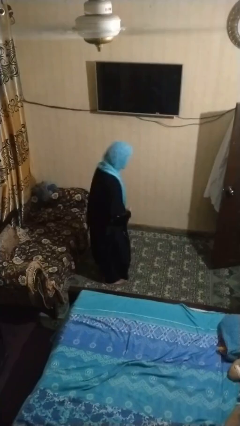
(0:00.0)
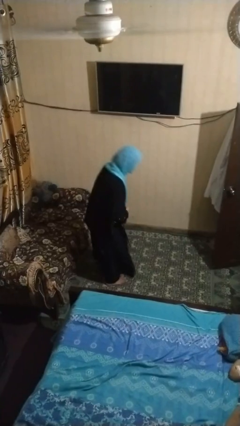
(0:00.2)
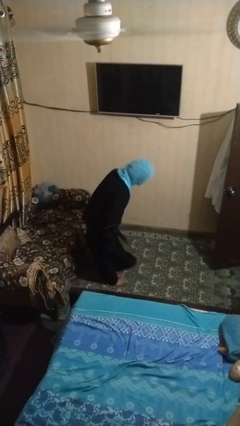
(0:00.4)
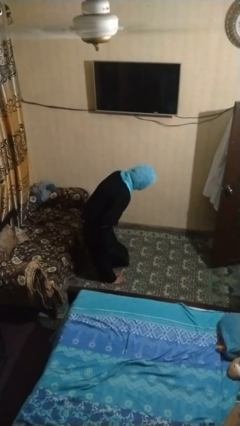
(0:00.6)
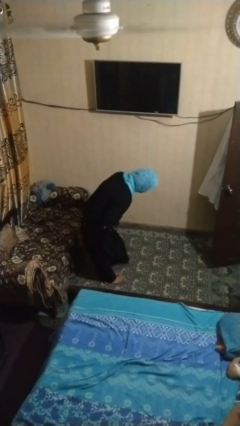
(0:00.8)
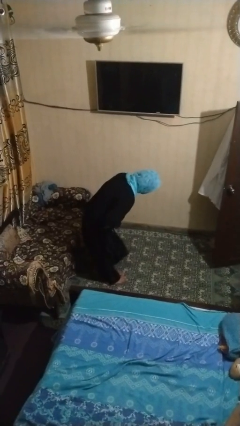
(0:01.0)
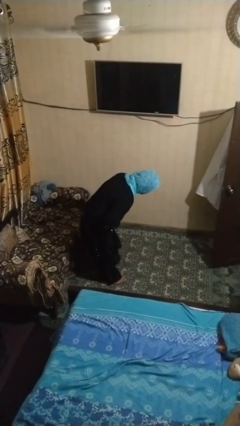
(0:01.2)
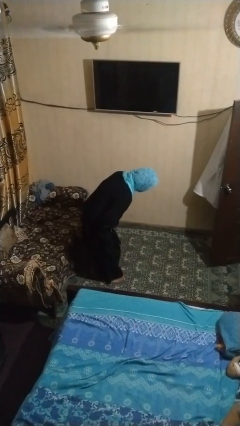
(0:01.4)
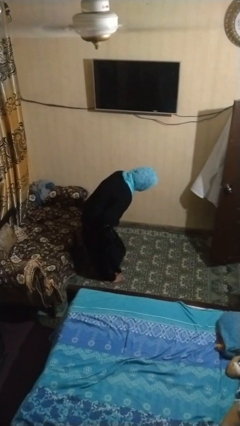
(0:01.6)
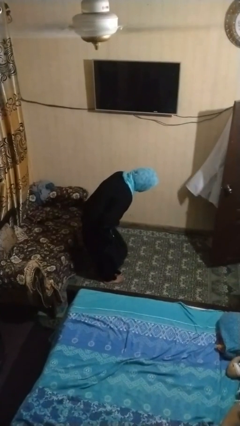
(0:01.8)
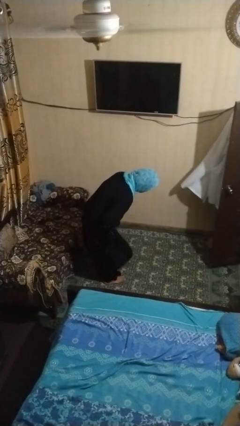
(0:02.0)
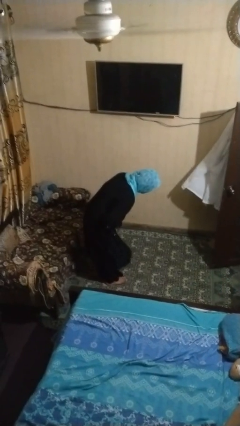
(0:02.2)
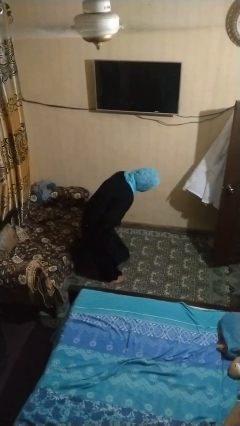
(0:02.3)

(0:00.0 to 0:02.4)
person bows

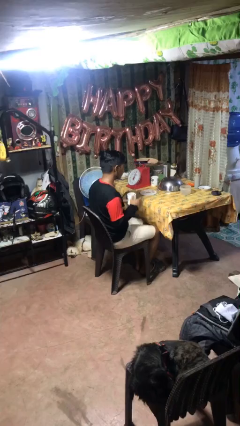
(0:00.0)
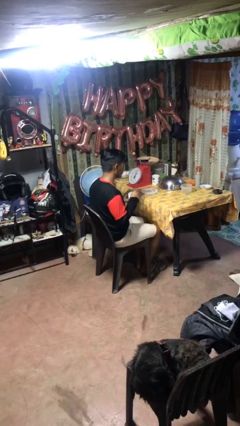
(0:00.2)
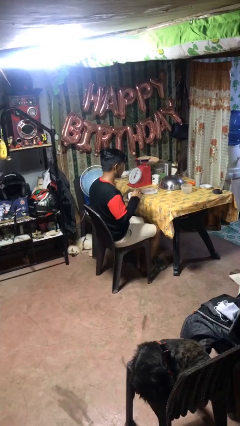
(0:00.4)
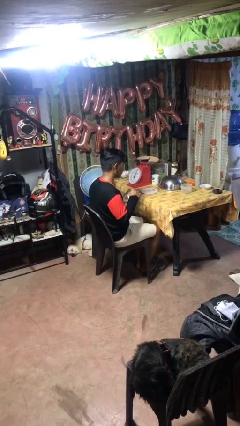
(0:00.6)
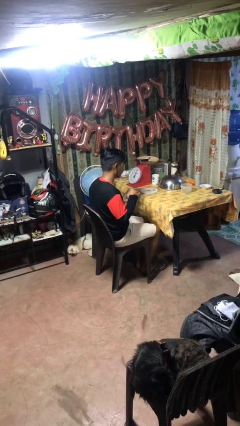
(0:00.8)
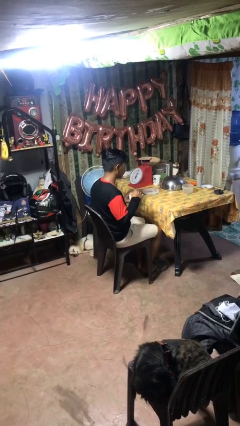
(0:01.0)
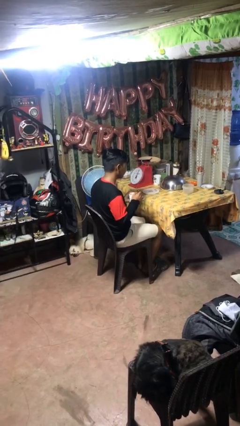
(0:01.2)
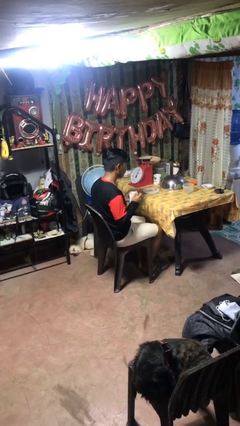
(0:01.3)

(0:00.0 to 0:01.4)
person stirs mug

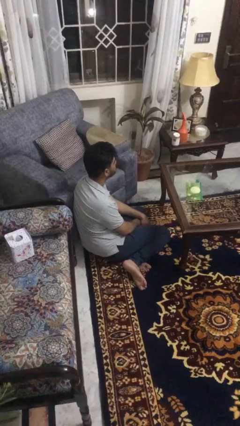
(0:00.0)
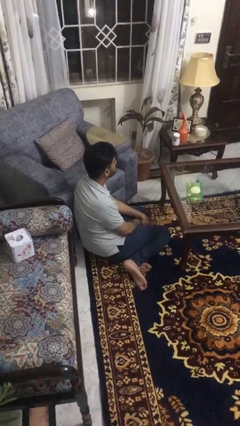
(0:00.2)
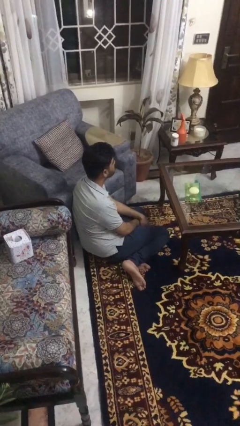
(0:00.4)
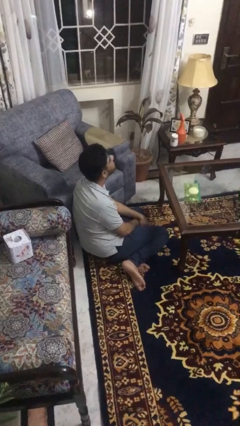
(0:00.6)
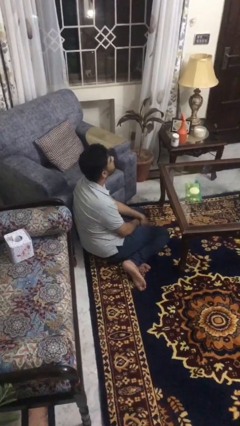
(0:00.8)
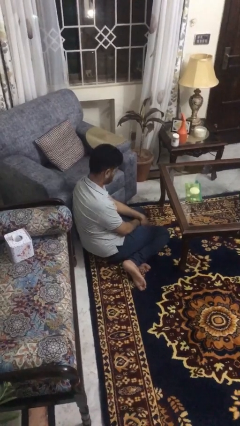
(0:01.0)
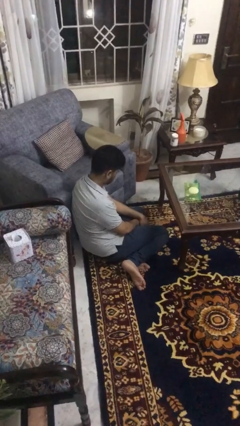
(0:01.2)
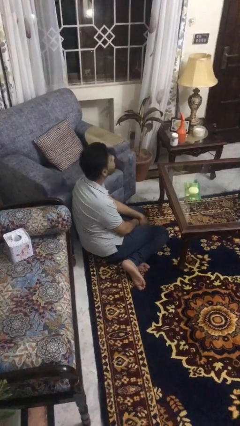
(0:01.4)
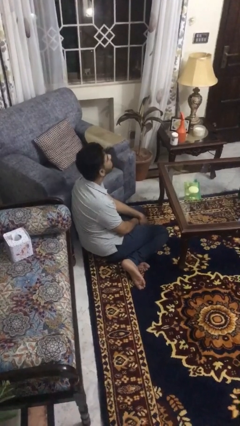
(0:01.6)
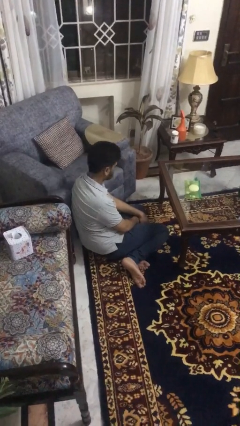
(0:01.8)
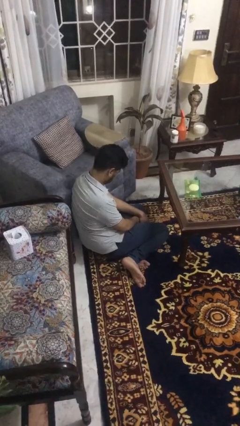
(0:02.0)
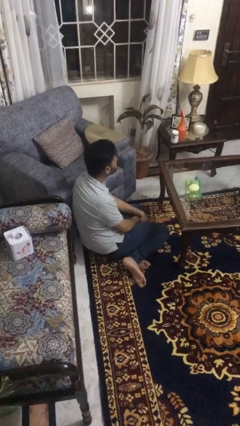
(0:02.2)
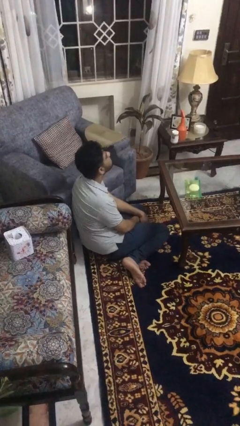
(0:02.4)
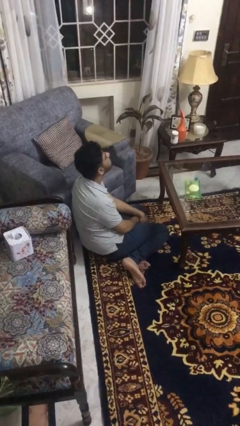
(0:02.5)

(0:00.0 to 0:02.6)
person nods head

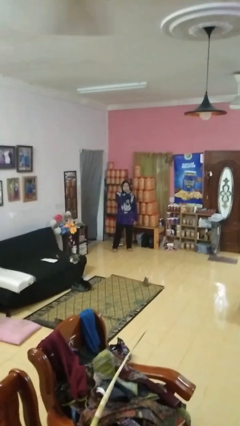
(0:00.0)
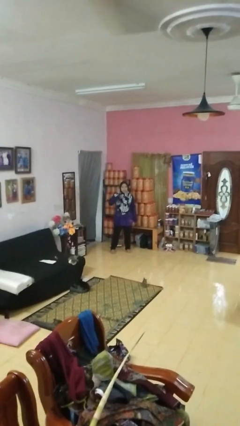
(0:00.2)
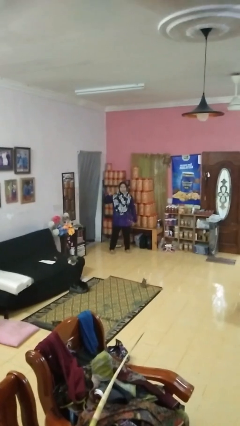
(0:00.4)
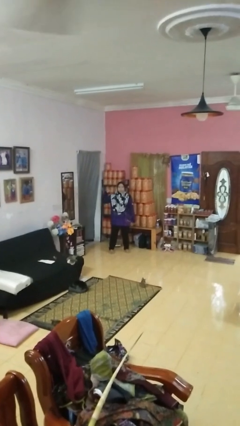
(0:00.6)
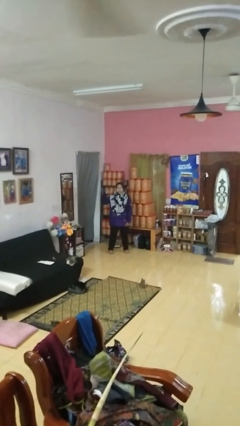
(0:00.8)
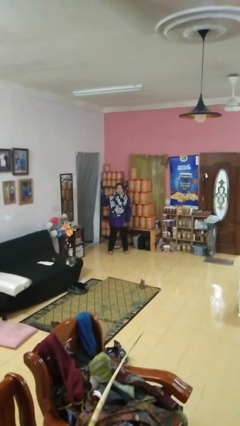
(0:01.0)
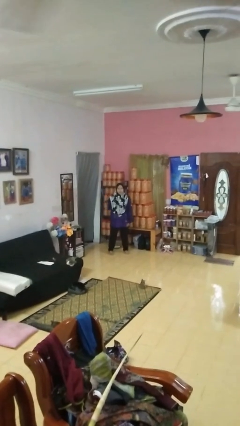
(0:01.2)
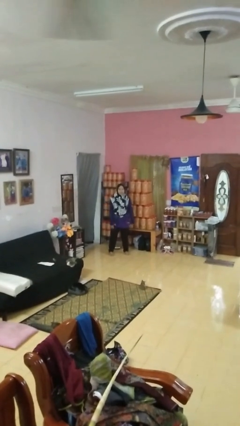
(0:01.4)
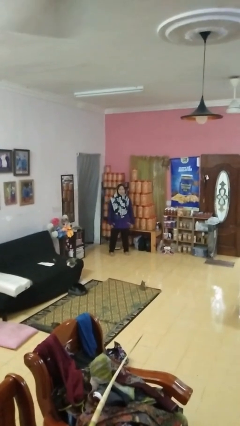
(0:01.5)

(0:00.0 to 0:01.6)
person gestures cut

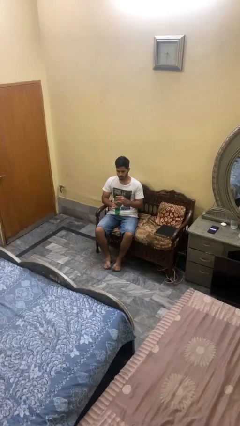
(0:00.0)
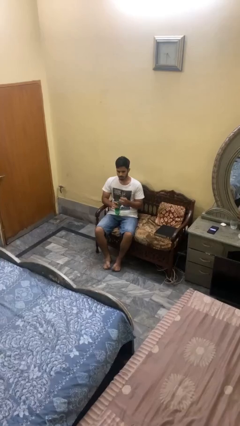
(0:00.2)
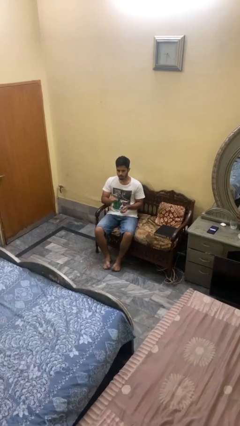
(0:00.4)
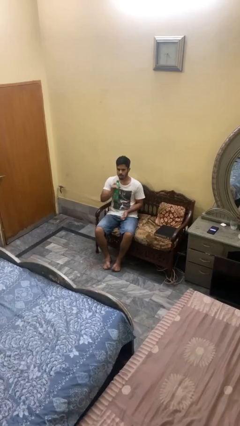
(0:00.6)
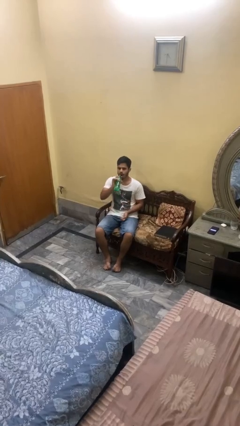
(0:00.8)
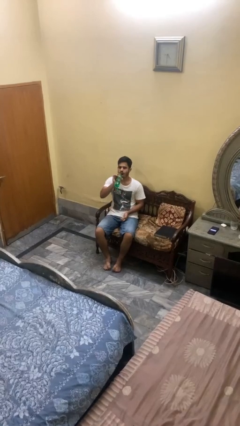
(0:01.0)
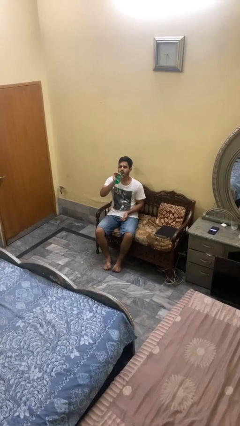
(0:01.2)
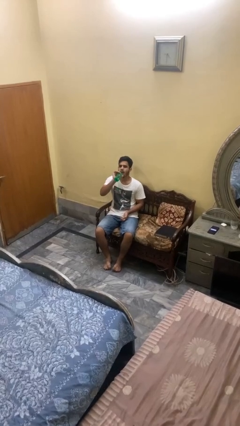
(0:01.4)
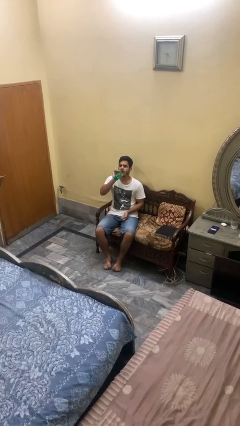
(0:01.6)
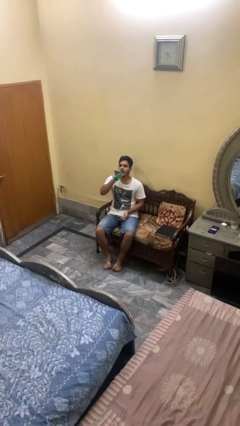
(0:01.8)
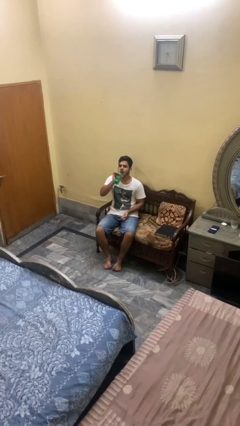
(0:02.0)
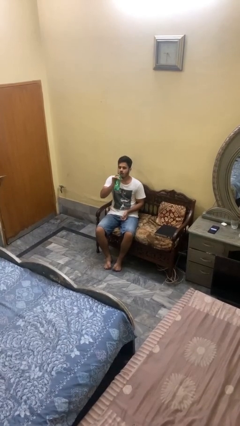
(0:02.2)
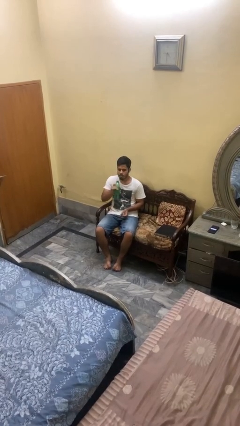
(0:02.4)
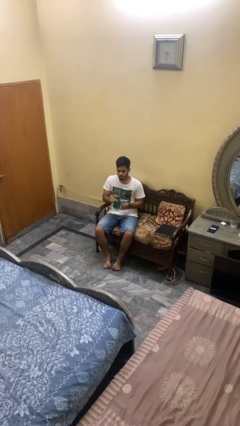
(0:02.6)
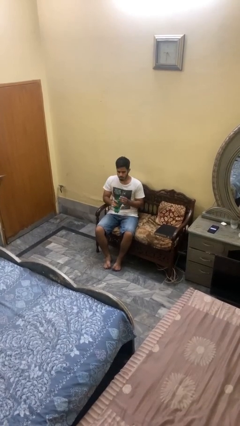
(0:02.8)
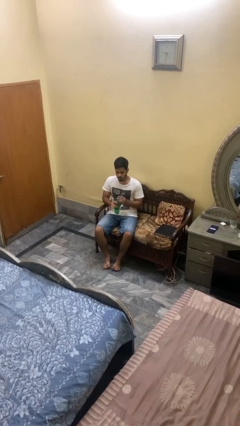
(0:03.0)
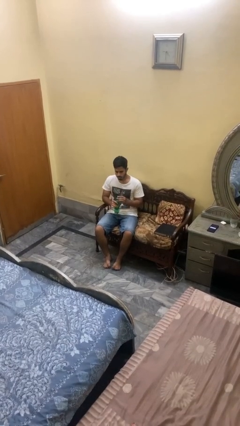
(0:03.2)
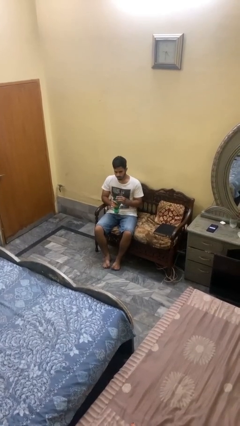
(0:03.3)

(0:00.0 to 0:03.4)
person drinks from bottle

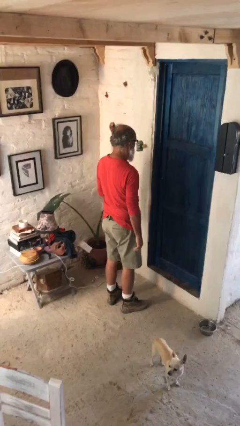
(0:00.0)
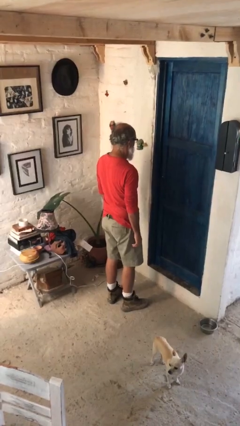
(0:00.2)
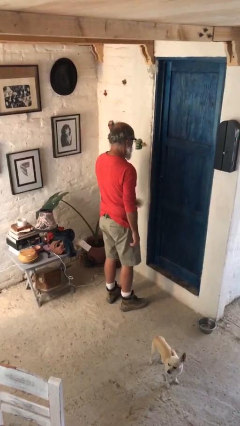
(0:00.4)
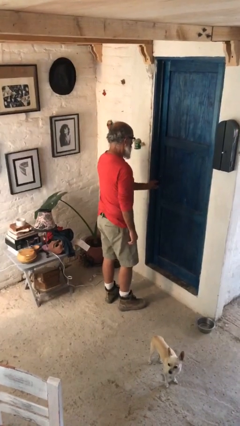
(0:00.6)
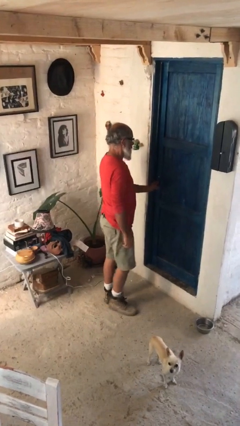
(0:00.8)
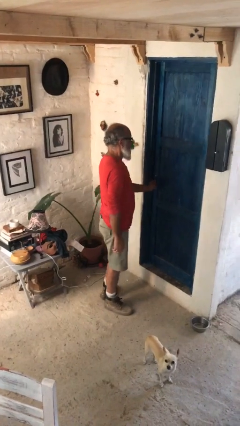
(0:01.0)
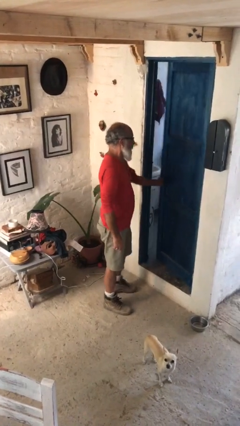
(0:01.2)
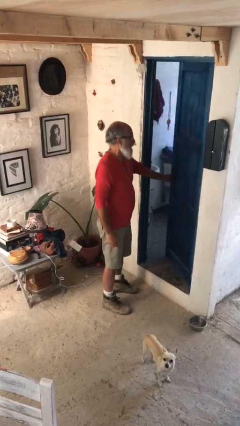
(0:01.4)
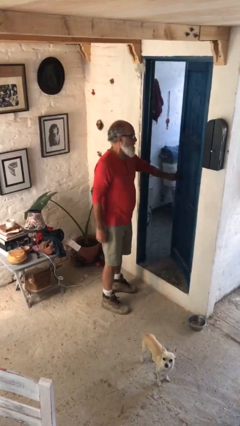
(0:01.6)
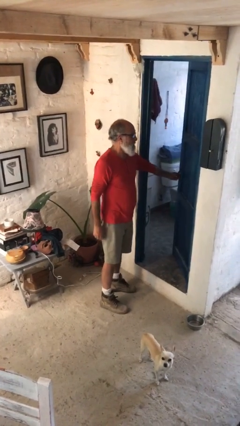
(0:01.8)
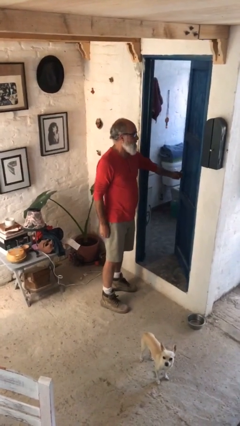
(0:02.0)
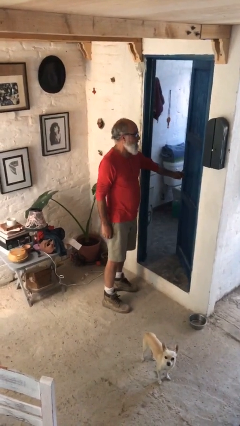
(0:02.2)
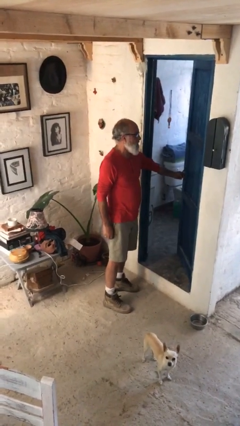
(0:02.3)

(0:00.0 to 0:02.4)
person opens facility door

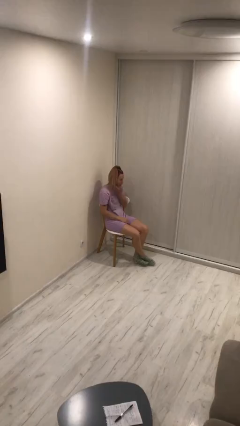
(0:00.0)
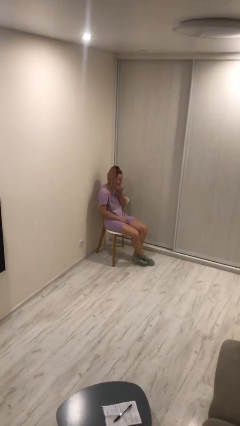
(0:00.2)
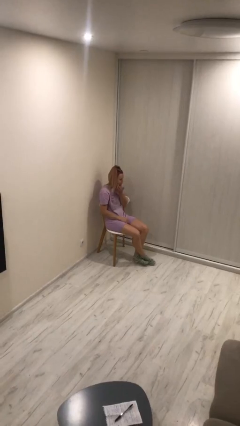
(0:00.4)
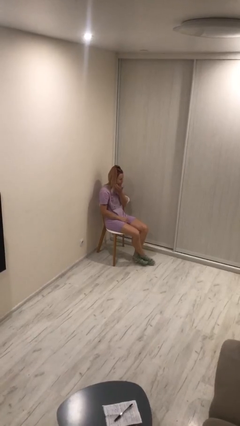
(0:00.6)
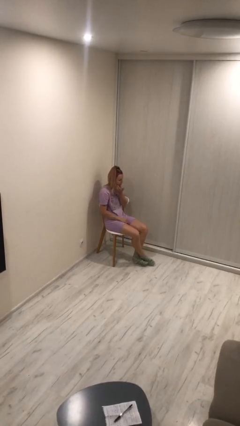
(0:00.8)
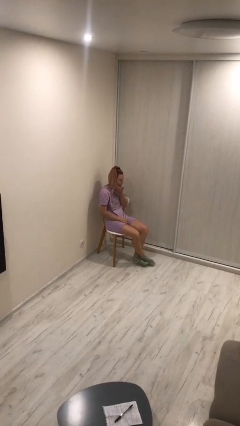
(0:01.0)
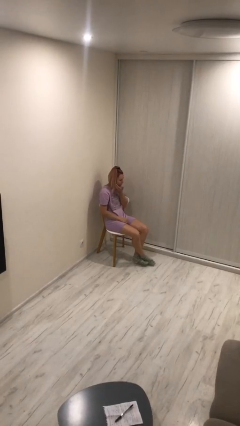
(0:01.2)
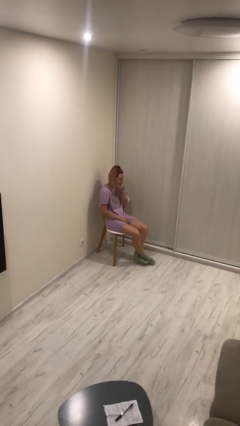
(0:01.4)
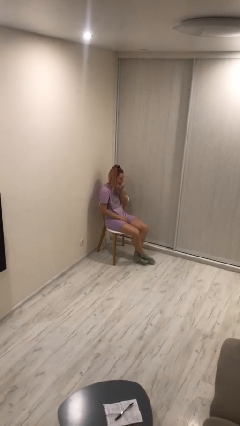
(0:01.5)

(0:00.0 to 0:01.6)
person scratches face

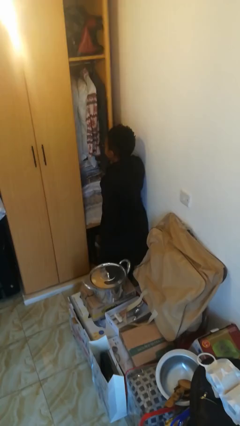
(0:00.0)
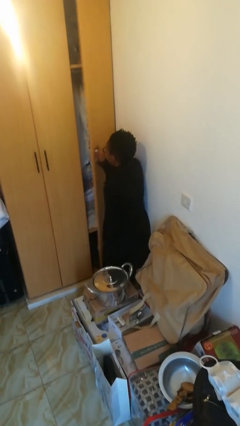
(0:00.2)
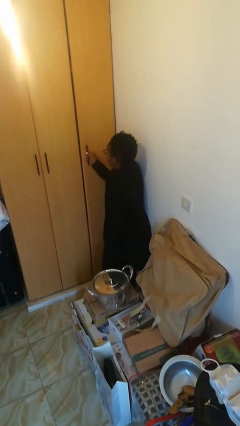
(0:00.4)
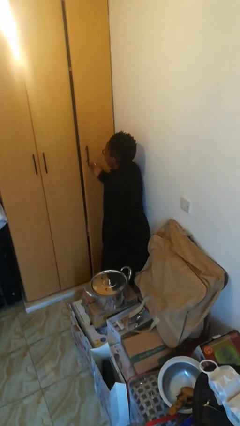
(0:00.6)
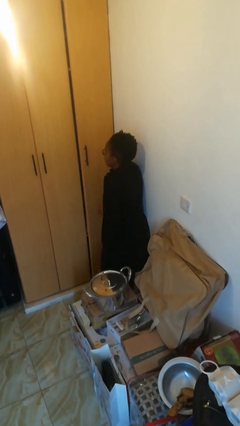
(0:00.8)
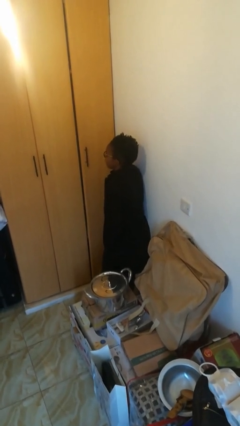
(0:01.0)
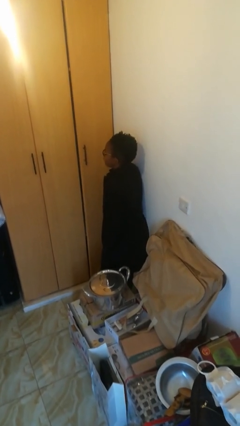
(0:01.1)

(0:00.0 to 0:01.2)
person closes closet door

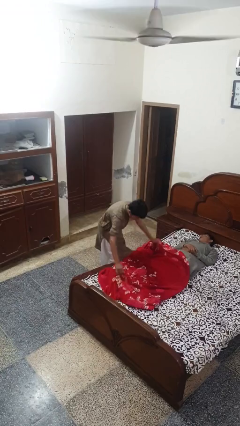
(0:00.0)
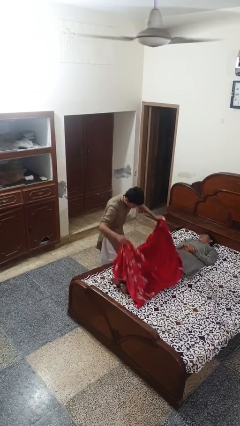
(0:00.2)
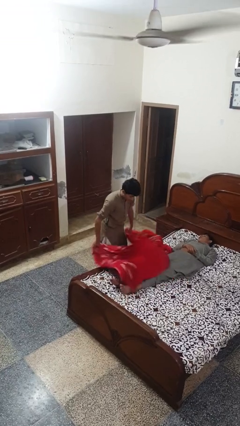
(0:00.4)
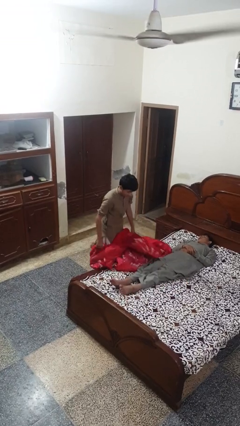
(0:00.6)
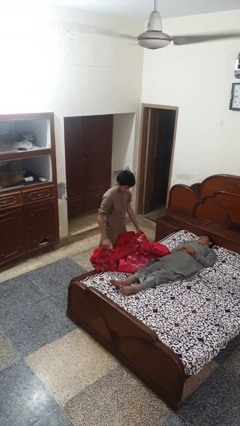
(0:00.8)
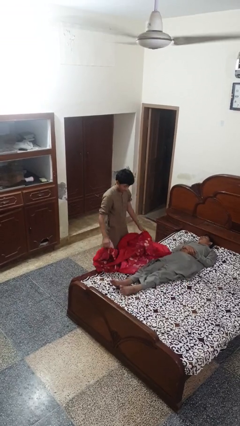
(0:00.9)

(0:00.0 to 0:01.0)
person uncovers friend with blanket
